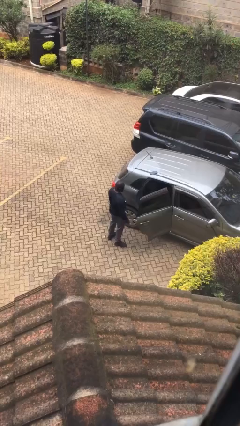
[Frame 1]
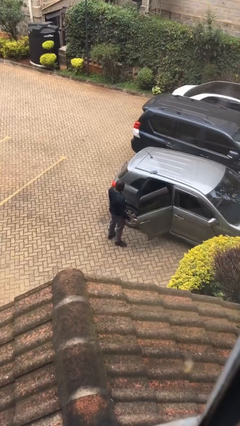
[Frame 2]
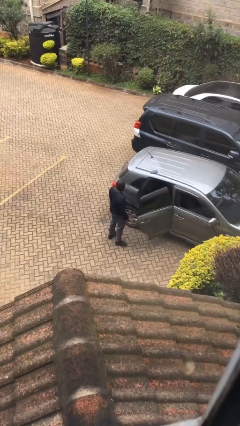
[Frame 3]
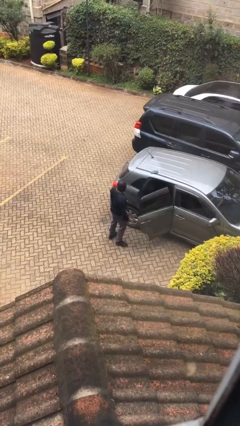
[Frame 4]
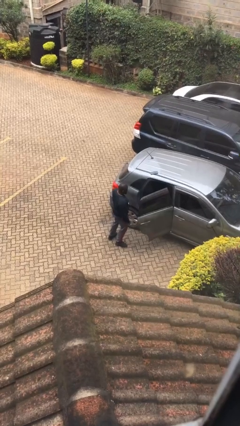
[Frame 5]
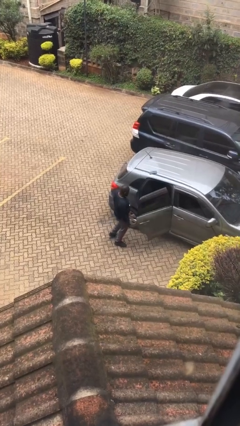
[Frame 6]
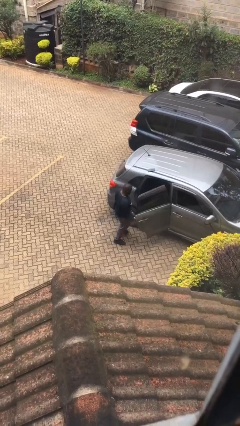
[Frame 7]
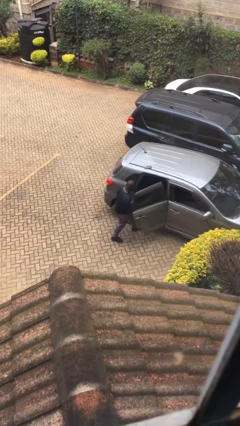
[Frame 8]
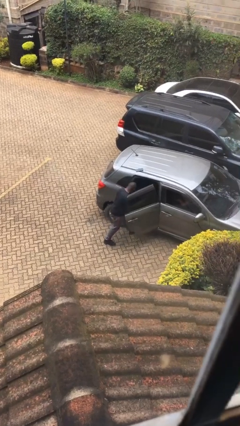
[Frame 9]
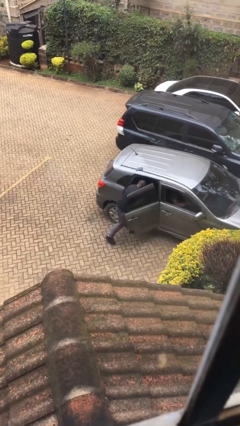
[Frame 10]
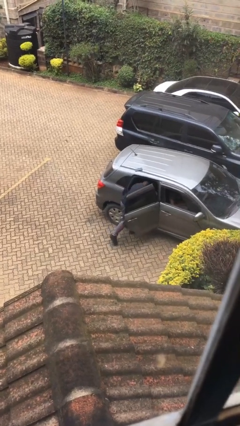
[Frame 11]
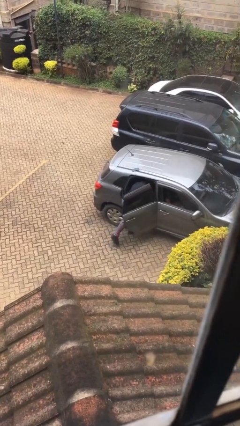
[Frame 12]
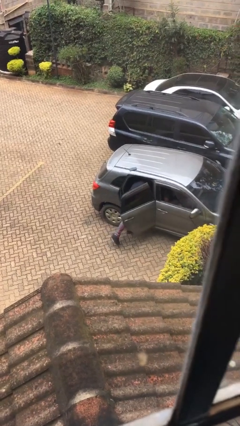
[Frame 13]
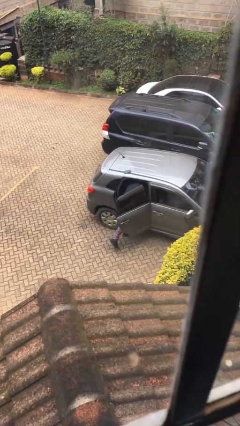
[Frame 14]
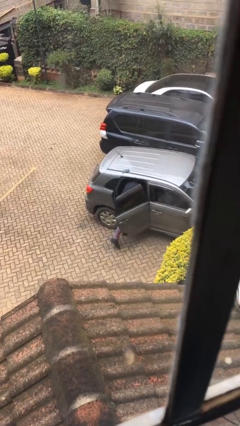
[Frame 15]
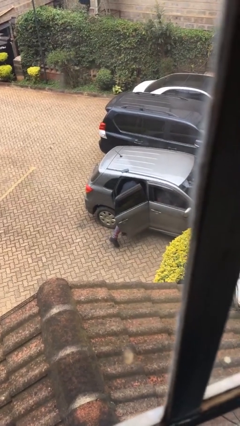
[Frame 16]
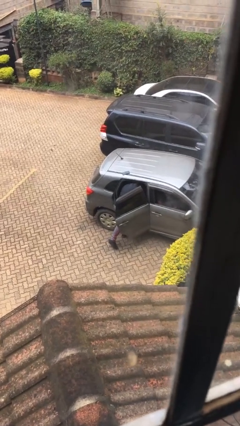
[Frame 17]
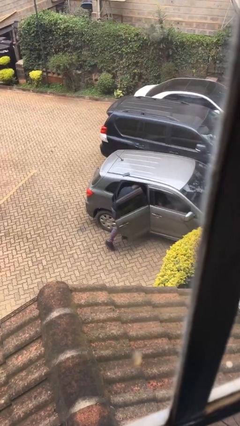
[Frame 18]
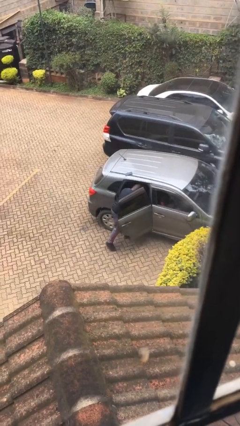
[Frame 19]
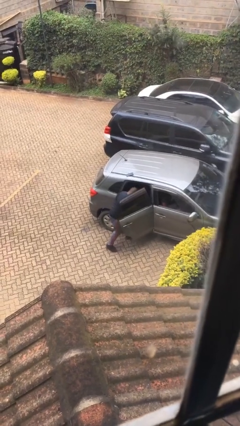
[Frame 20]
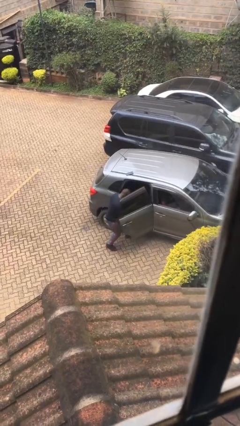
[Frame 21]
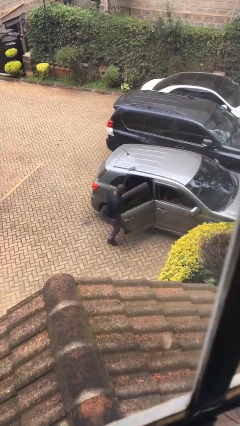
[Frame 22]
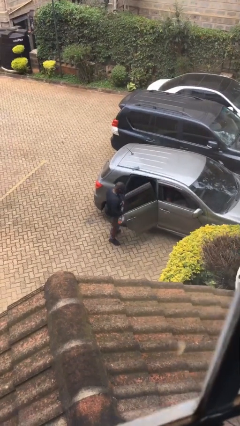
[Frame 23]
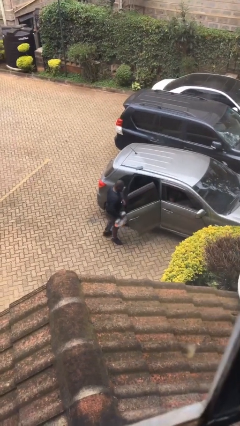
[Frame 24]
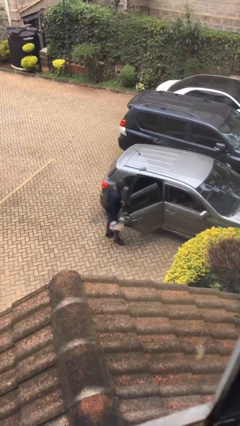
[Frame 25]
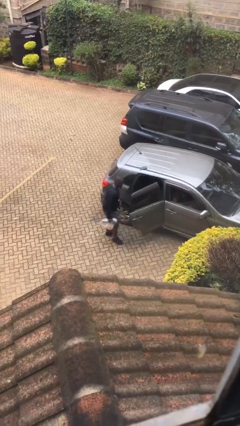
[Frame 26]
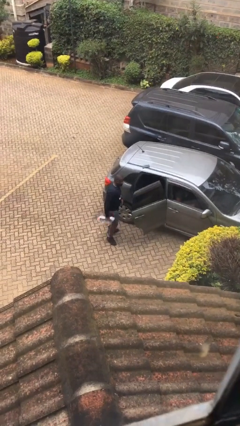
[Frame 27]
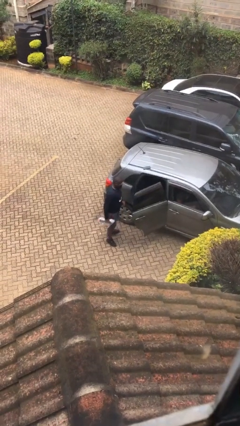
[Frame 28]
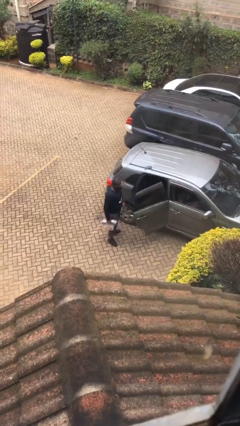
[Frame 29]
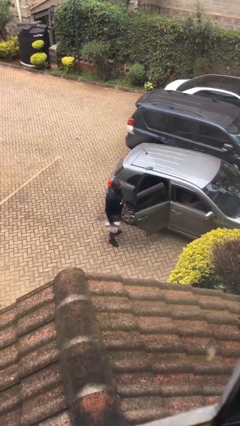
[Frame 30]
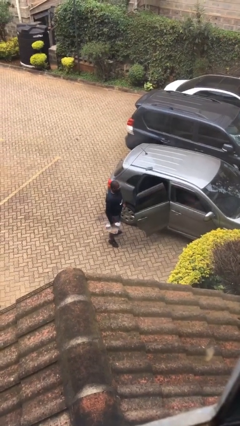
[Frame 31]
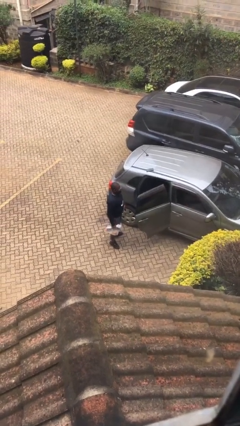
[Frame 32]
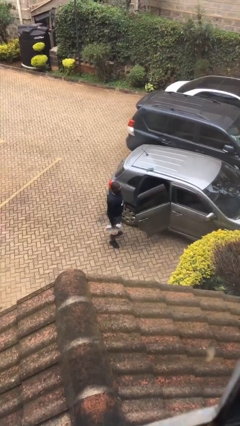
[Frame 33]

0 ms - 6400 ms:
person unloads car

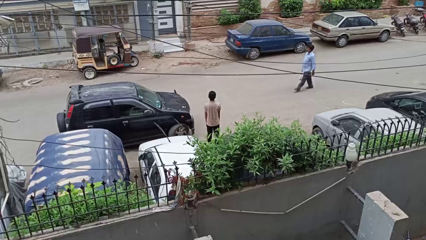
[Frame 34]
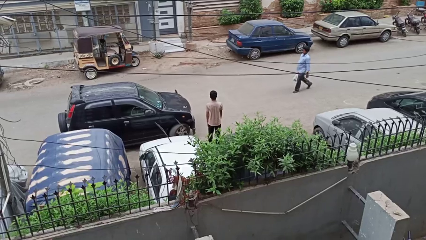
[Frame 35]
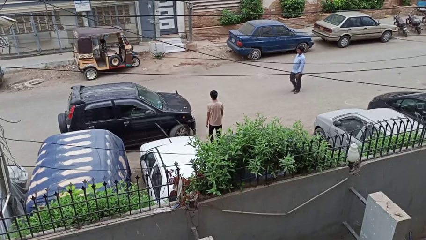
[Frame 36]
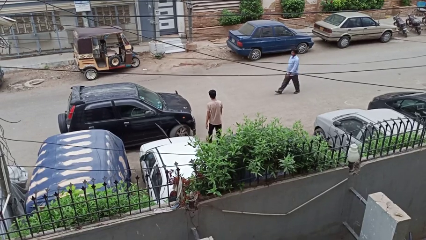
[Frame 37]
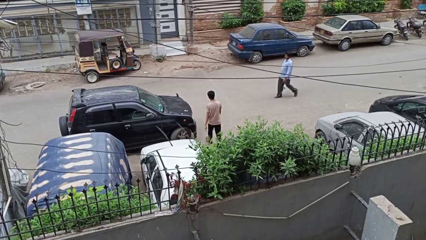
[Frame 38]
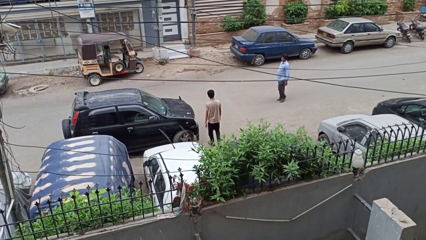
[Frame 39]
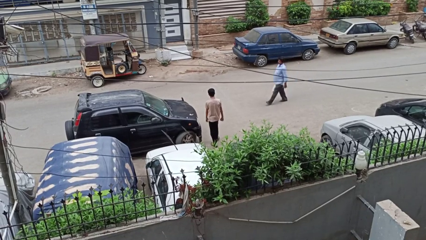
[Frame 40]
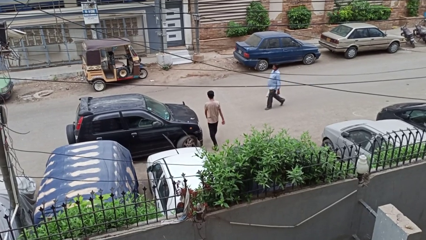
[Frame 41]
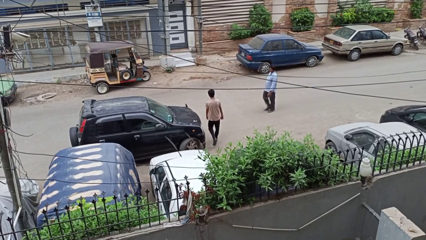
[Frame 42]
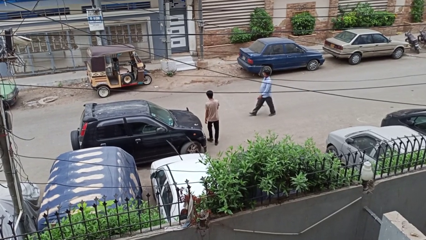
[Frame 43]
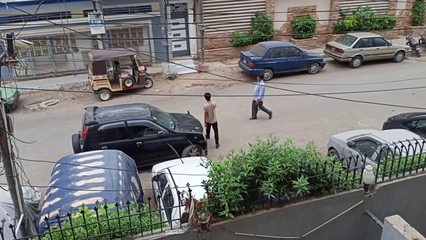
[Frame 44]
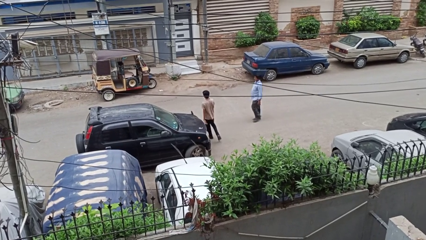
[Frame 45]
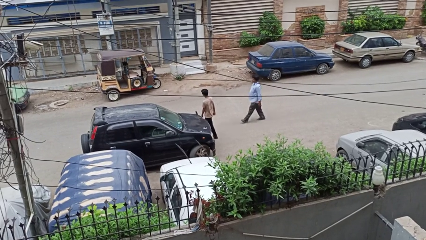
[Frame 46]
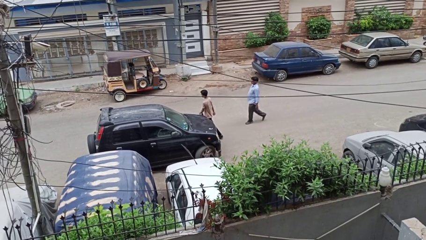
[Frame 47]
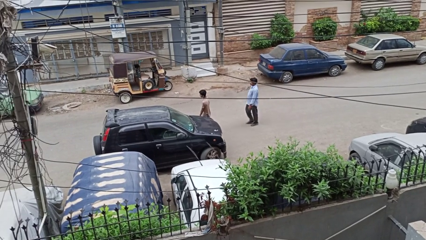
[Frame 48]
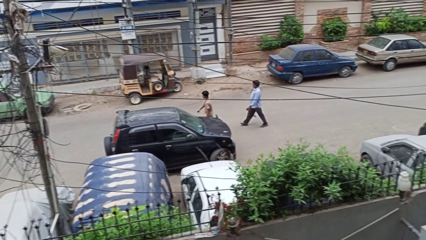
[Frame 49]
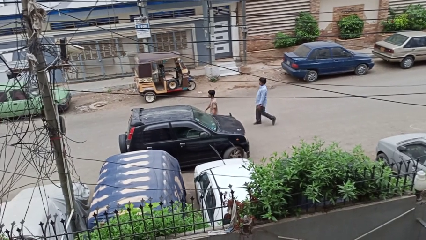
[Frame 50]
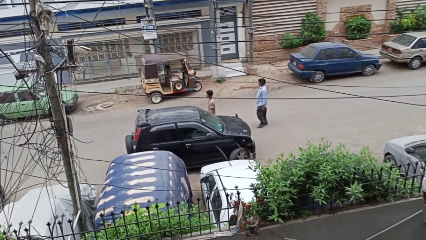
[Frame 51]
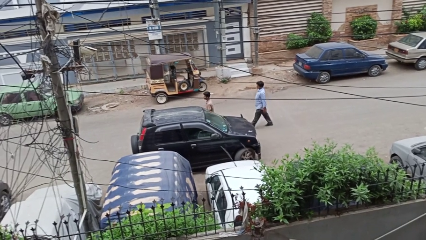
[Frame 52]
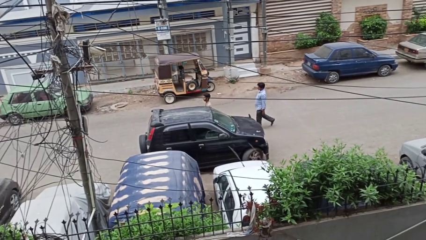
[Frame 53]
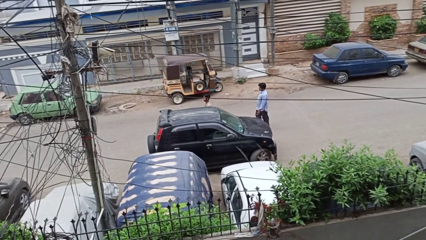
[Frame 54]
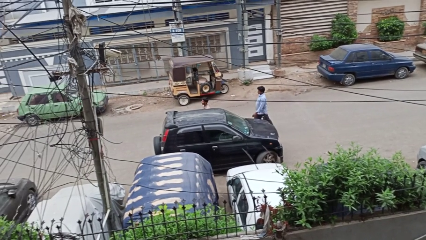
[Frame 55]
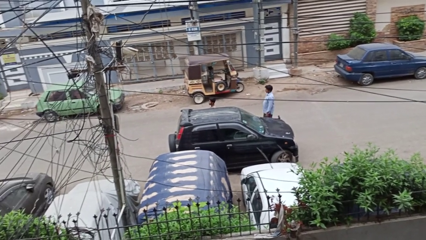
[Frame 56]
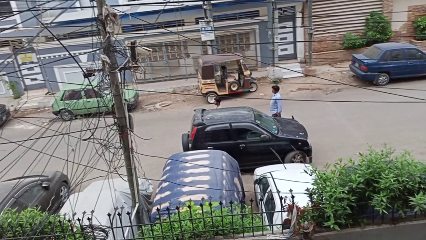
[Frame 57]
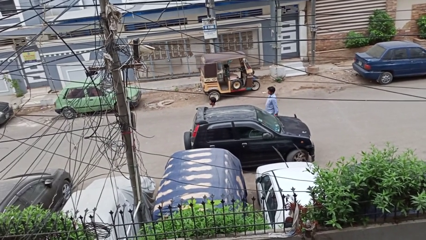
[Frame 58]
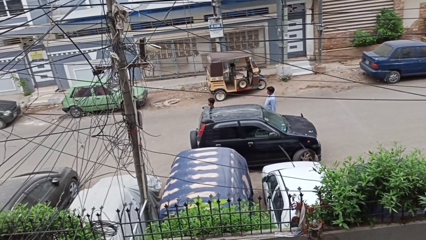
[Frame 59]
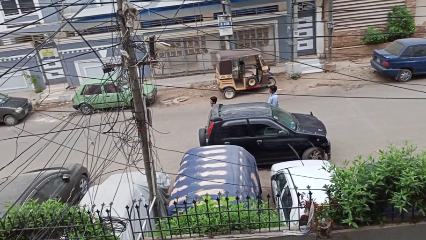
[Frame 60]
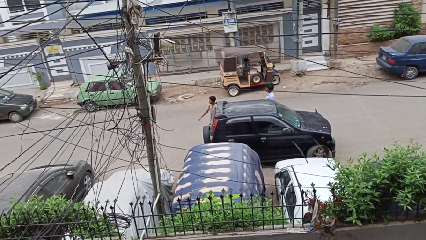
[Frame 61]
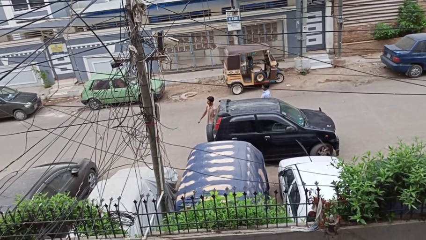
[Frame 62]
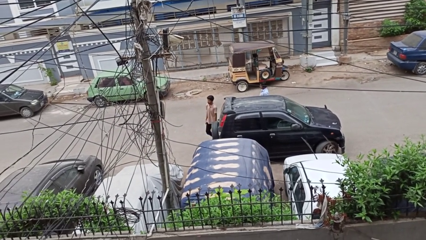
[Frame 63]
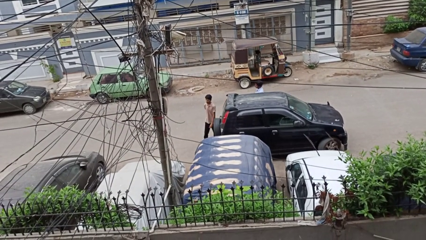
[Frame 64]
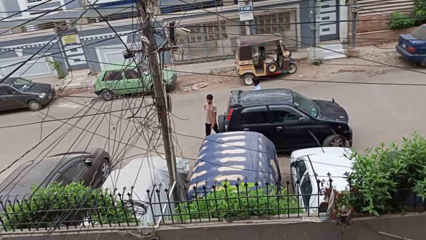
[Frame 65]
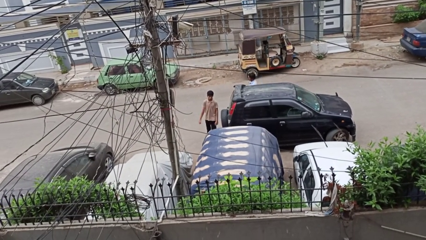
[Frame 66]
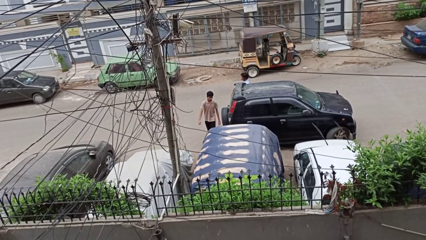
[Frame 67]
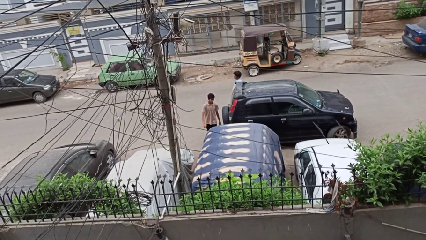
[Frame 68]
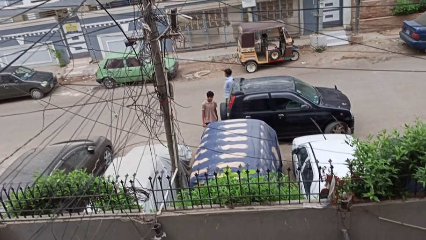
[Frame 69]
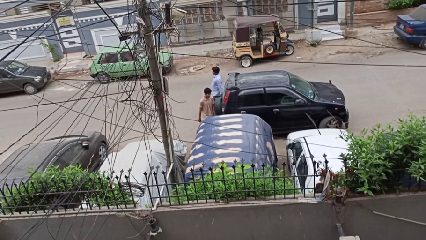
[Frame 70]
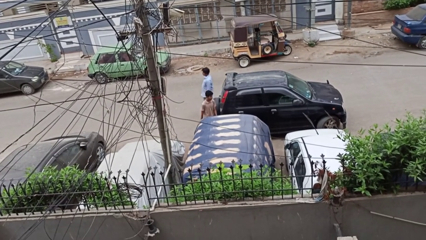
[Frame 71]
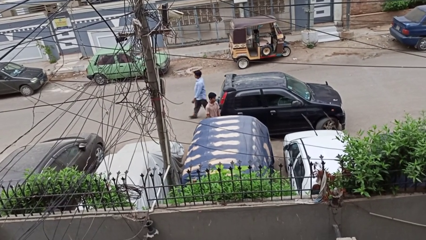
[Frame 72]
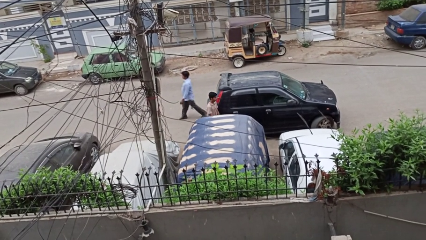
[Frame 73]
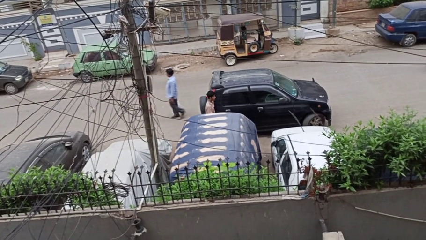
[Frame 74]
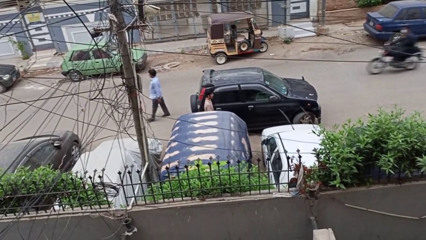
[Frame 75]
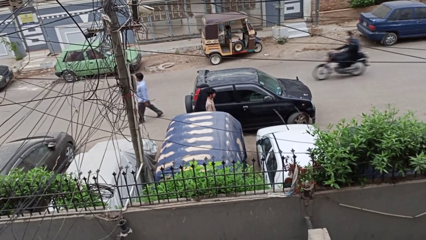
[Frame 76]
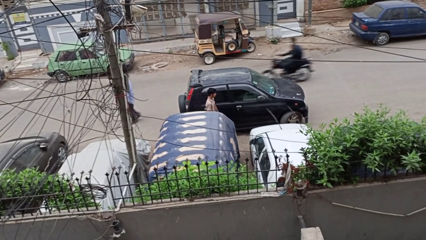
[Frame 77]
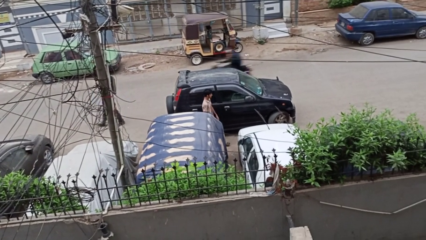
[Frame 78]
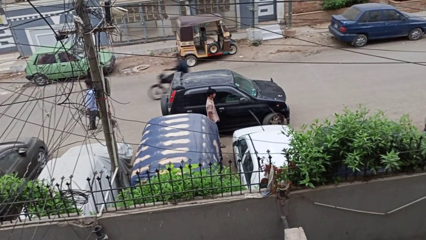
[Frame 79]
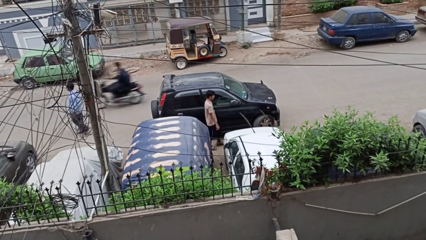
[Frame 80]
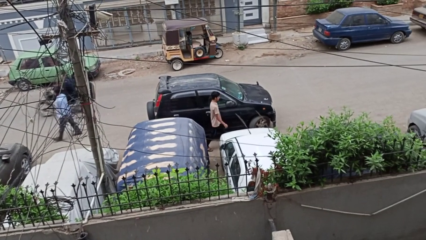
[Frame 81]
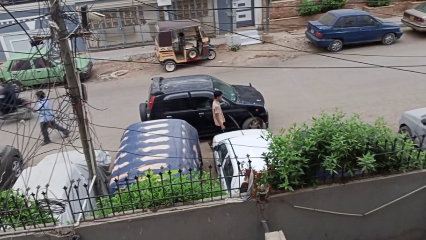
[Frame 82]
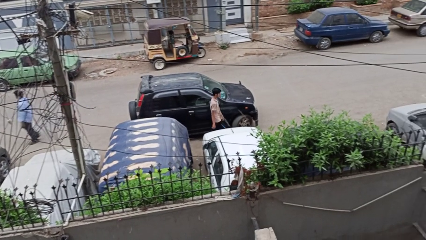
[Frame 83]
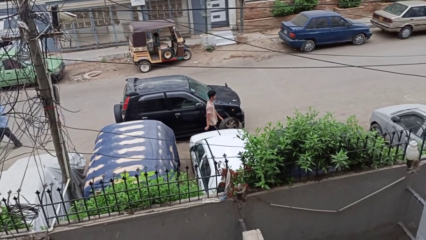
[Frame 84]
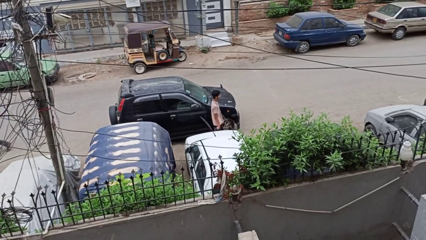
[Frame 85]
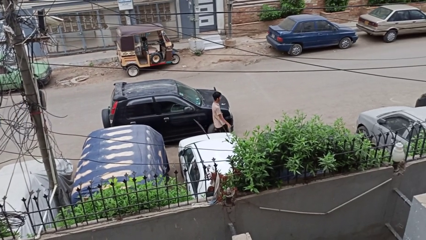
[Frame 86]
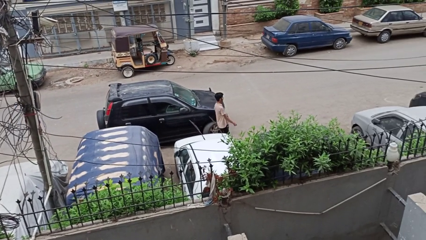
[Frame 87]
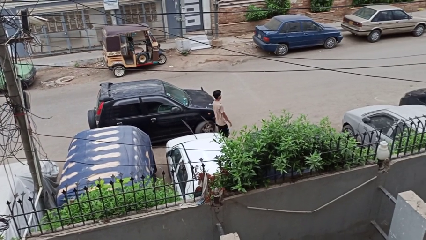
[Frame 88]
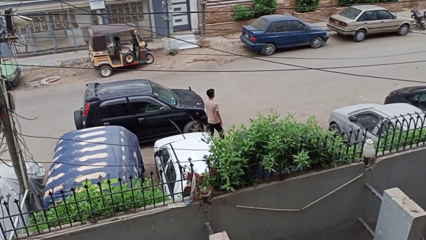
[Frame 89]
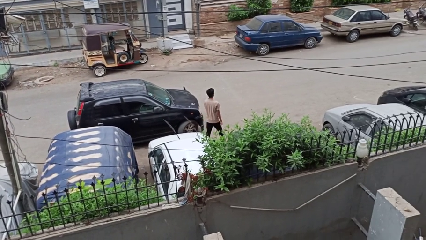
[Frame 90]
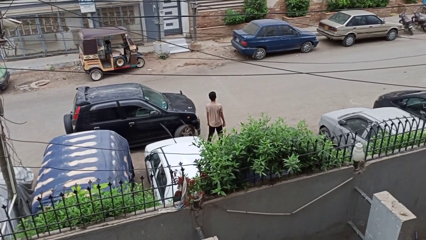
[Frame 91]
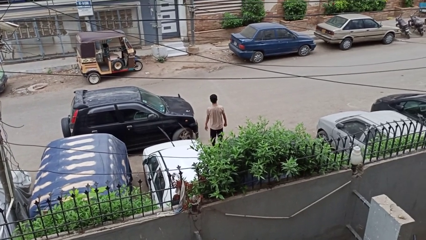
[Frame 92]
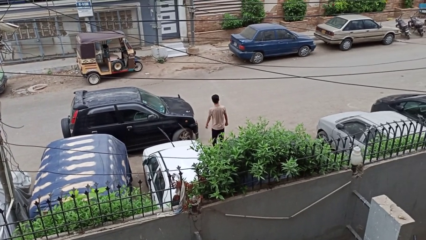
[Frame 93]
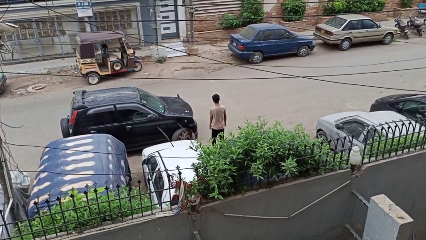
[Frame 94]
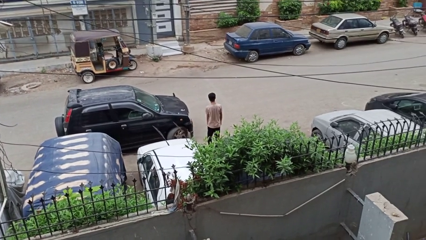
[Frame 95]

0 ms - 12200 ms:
person walks around car
